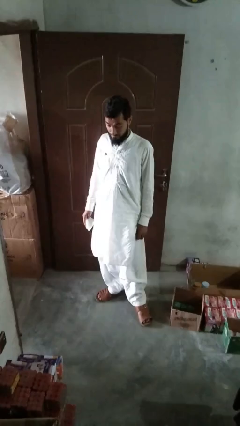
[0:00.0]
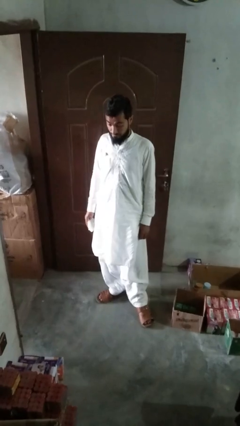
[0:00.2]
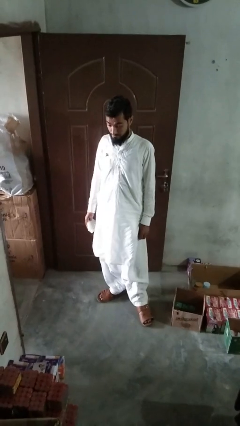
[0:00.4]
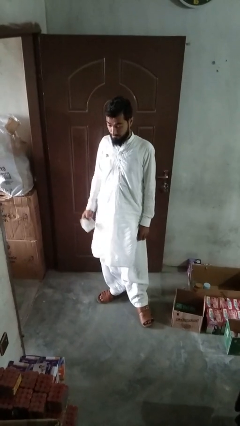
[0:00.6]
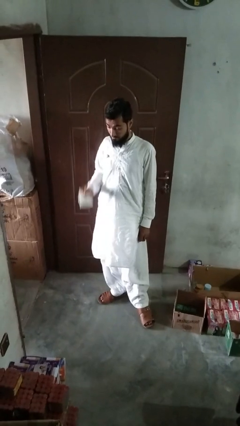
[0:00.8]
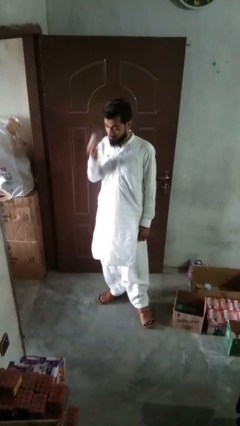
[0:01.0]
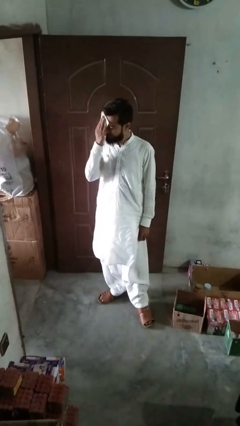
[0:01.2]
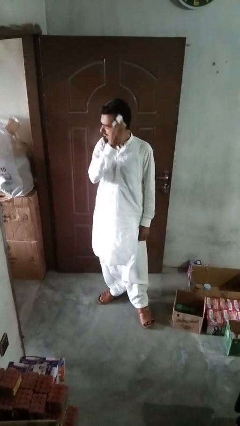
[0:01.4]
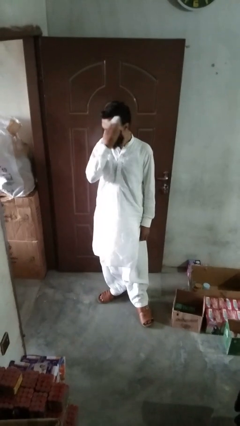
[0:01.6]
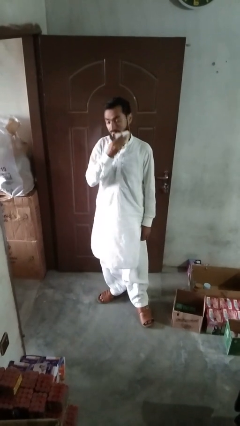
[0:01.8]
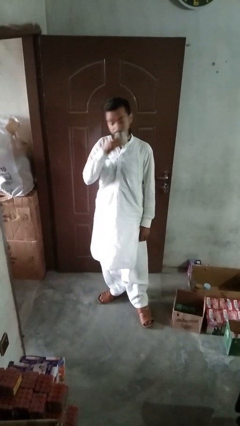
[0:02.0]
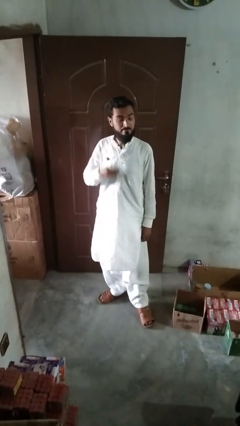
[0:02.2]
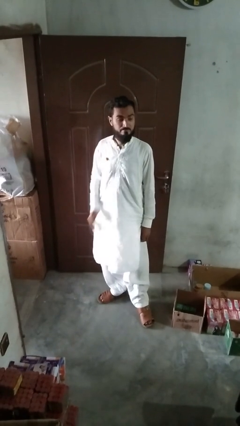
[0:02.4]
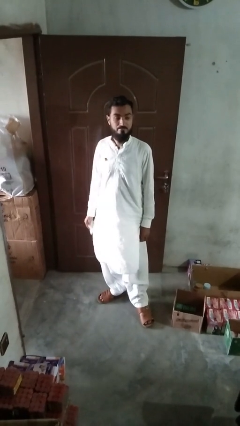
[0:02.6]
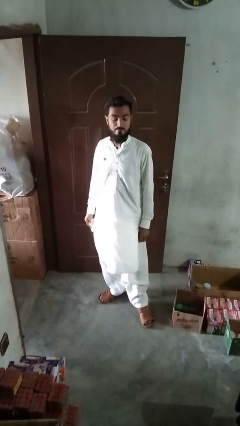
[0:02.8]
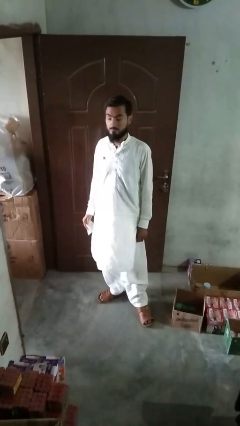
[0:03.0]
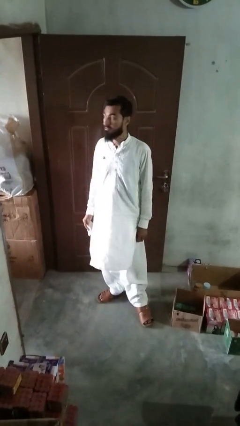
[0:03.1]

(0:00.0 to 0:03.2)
person wipes mouth with napkin

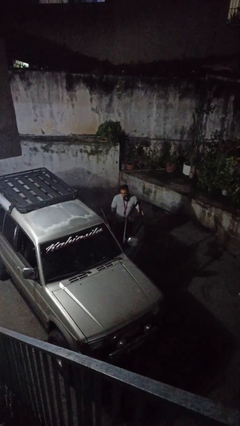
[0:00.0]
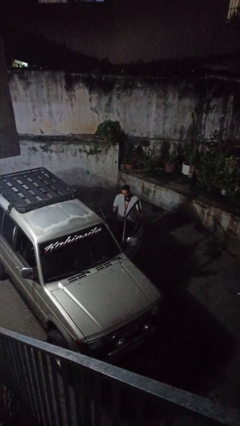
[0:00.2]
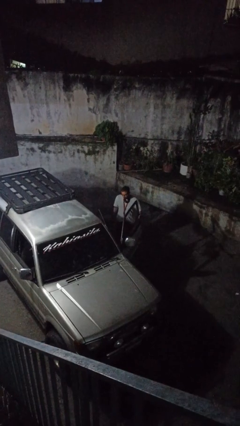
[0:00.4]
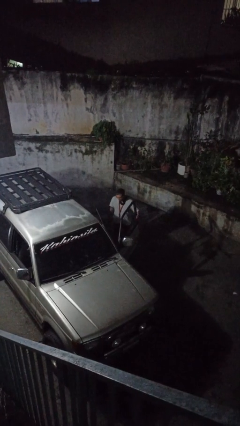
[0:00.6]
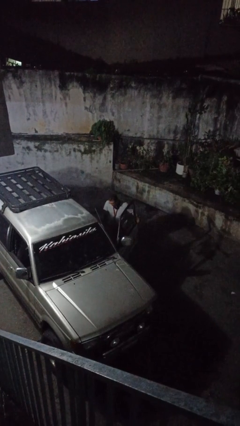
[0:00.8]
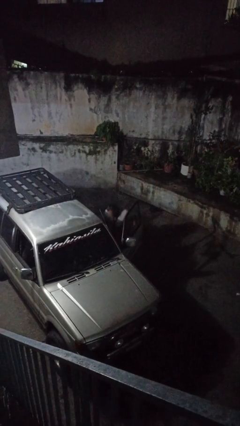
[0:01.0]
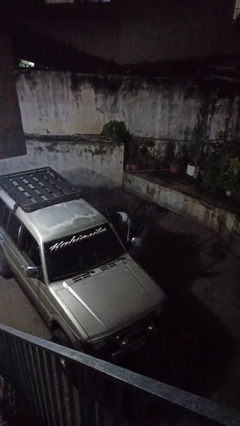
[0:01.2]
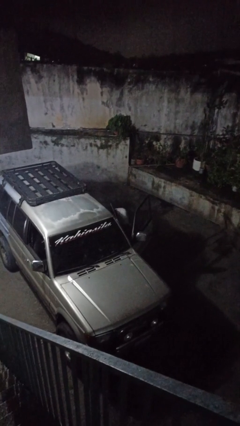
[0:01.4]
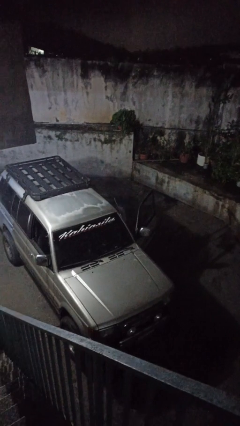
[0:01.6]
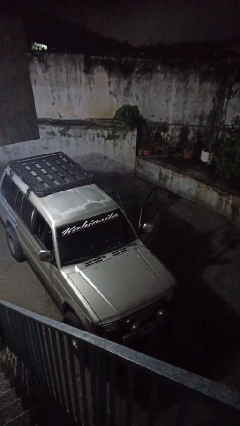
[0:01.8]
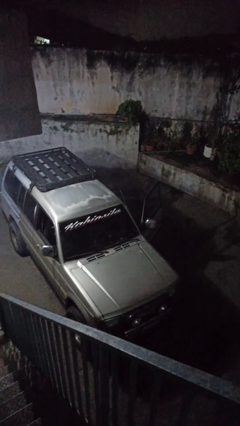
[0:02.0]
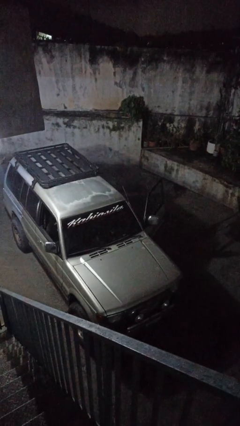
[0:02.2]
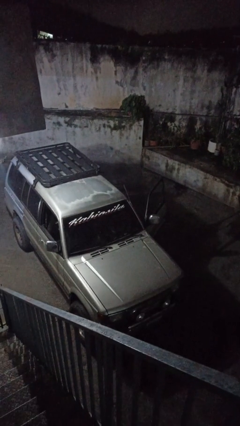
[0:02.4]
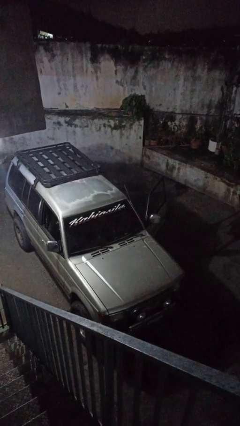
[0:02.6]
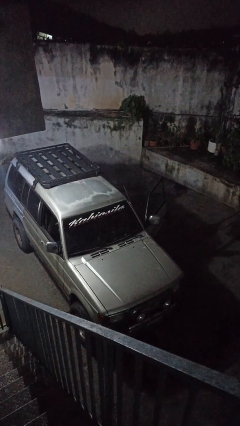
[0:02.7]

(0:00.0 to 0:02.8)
person enters car

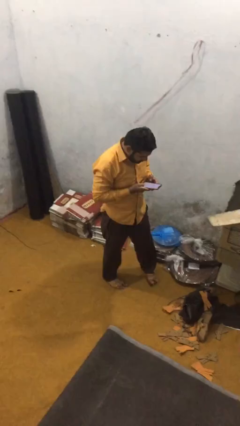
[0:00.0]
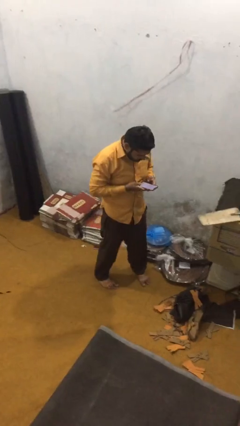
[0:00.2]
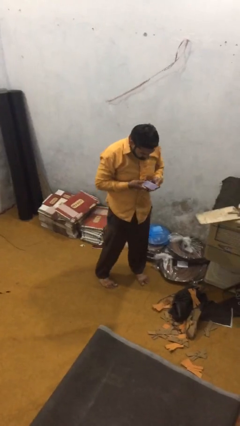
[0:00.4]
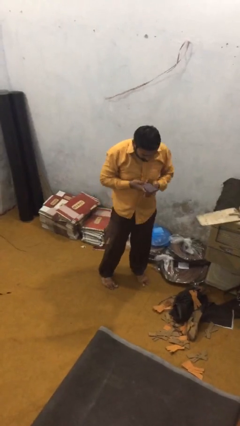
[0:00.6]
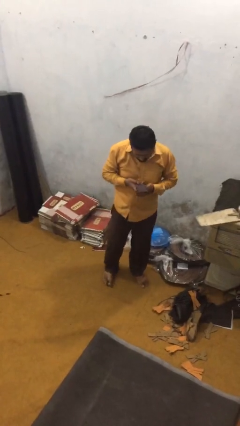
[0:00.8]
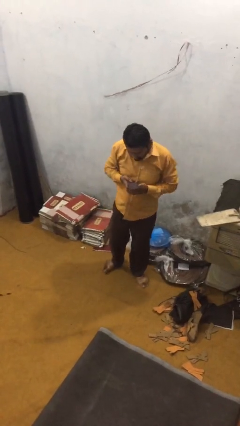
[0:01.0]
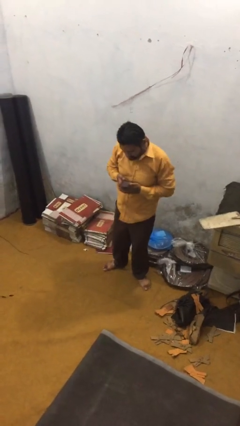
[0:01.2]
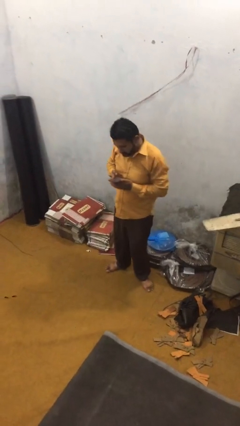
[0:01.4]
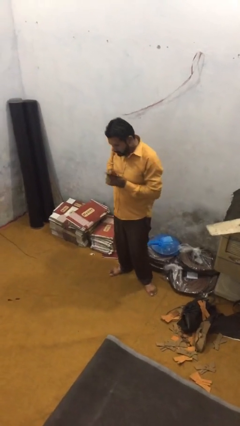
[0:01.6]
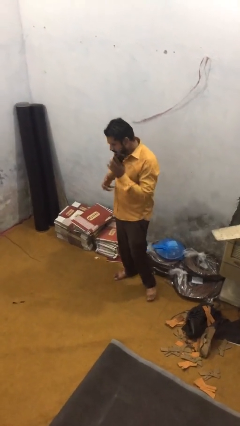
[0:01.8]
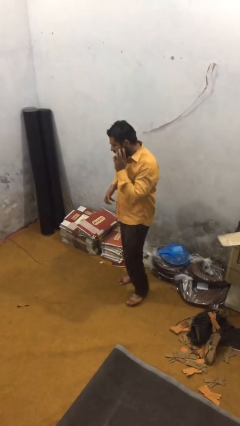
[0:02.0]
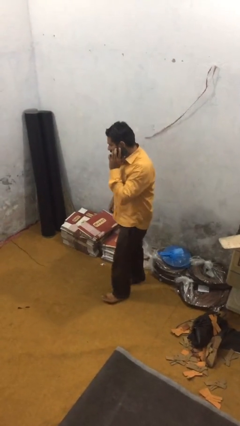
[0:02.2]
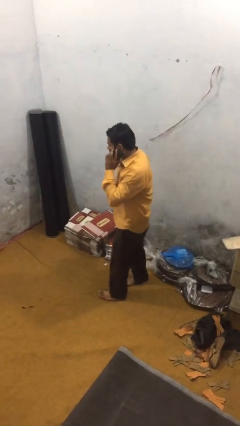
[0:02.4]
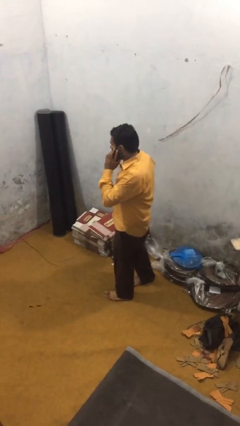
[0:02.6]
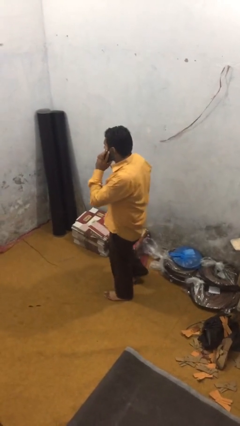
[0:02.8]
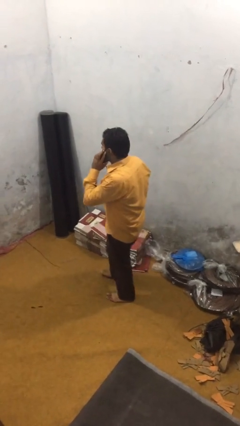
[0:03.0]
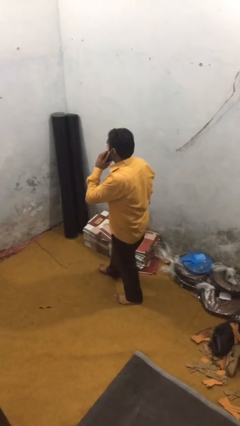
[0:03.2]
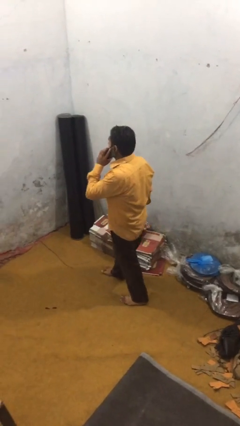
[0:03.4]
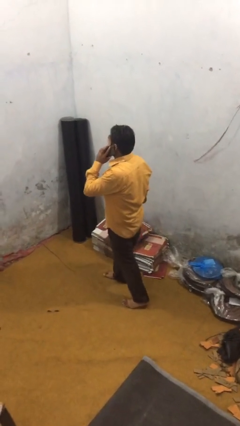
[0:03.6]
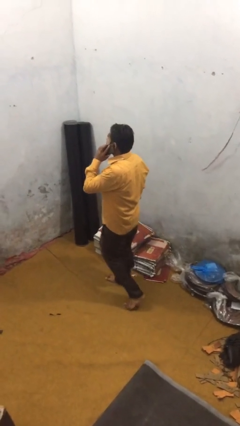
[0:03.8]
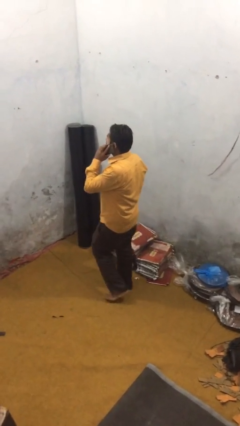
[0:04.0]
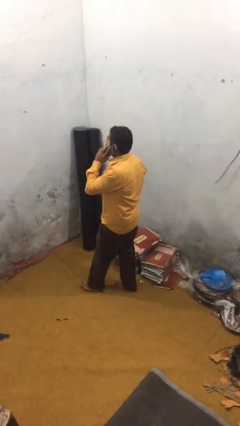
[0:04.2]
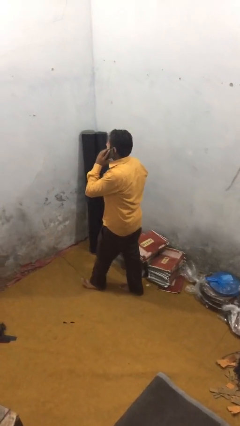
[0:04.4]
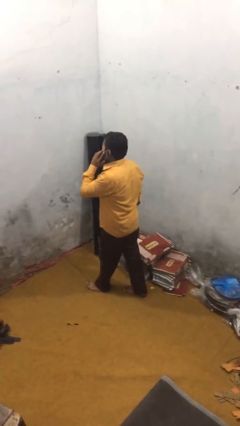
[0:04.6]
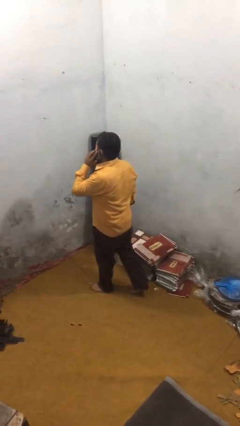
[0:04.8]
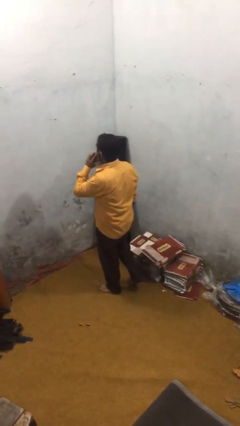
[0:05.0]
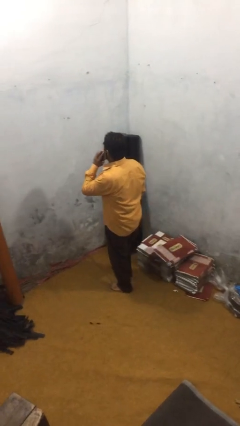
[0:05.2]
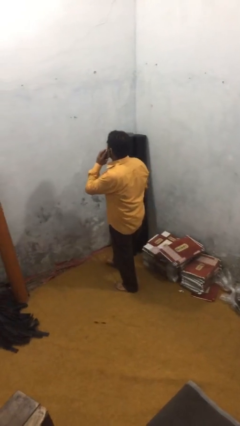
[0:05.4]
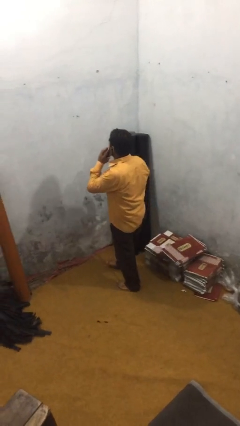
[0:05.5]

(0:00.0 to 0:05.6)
person talks on phone

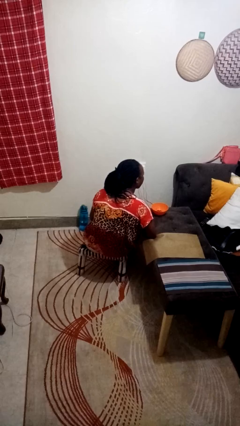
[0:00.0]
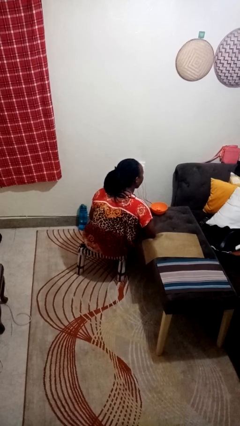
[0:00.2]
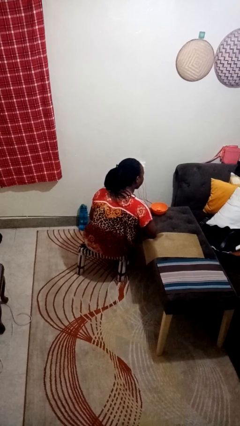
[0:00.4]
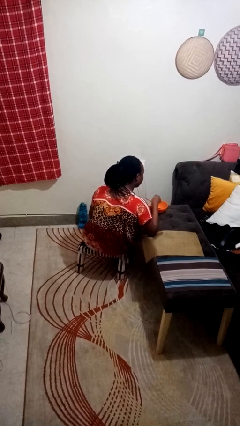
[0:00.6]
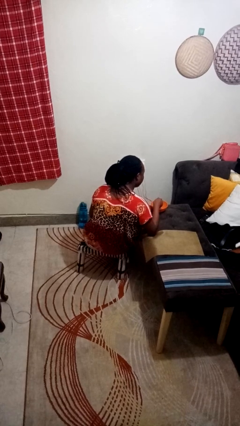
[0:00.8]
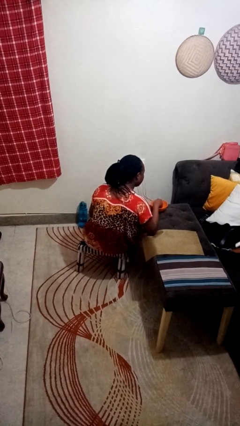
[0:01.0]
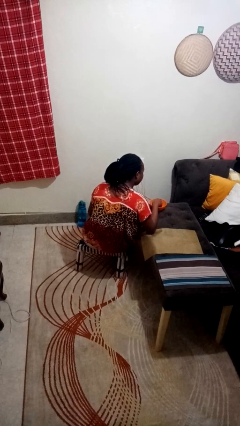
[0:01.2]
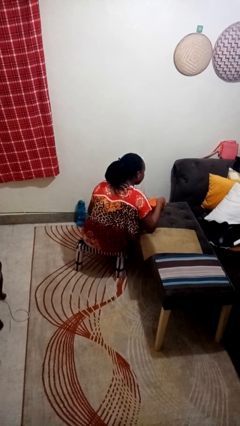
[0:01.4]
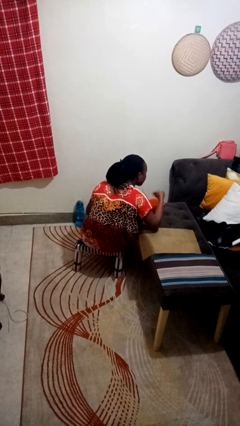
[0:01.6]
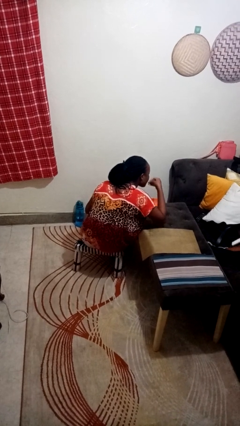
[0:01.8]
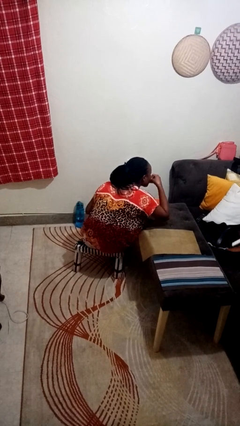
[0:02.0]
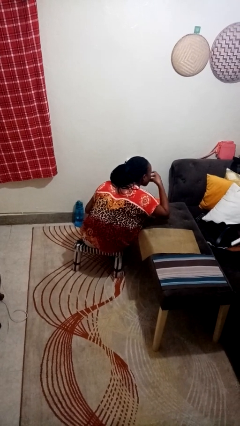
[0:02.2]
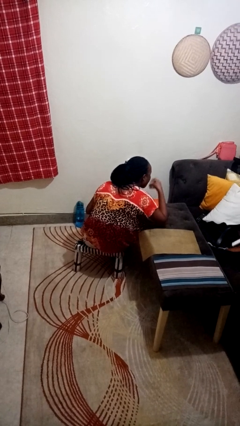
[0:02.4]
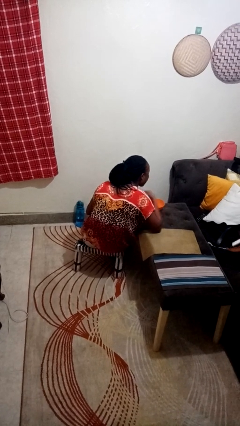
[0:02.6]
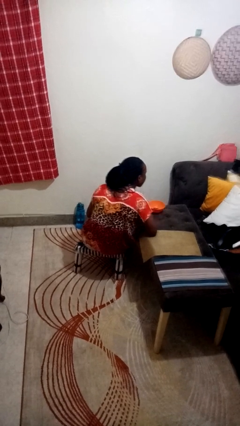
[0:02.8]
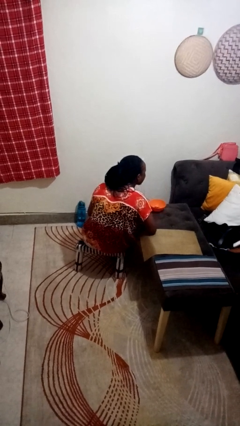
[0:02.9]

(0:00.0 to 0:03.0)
person eats with hands

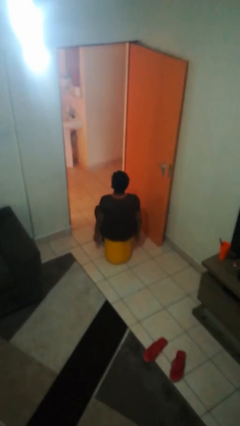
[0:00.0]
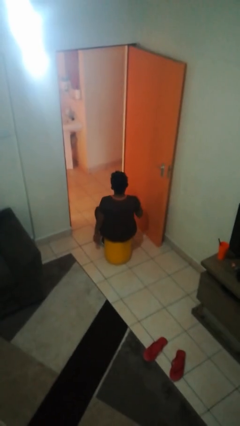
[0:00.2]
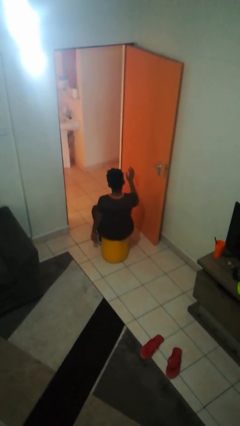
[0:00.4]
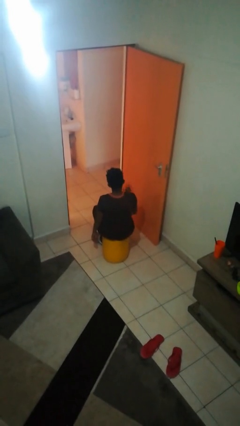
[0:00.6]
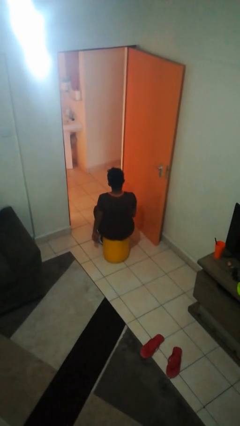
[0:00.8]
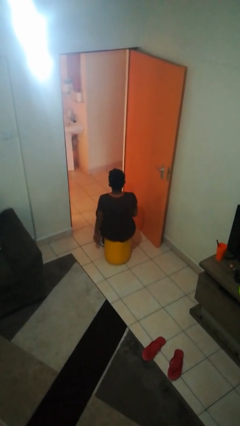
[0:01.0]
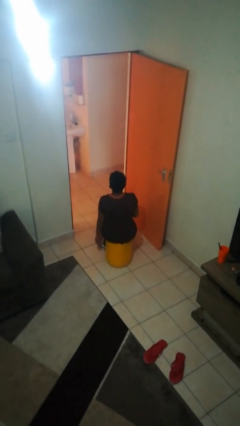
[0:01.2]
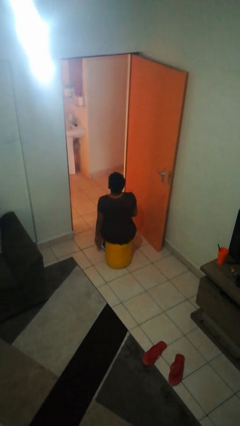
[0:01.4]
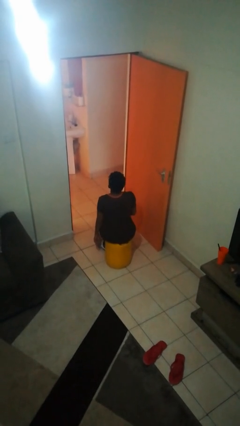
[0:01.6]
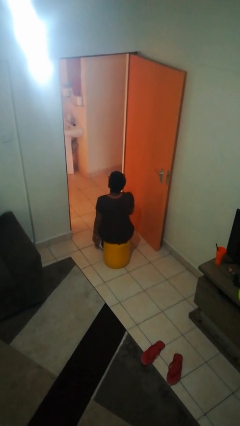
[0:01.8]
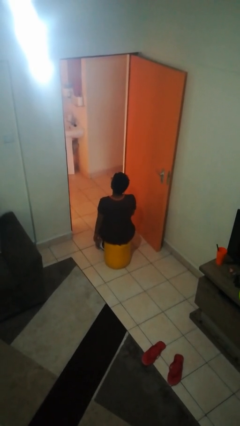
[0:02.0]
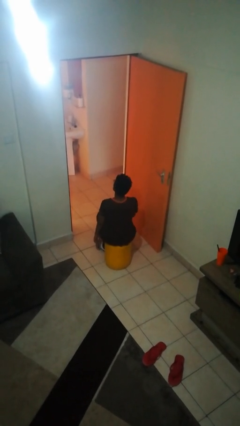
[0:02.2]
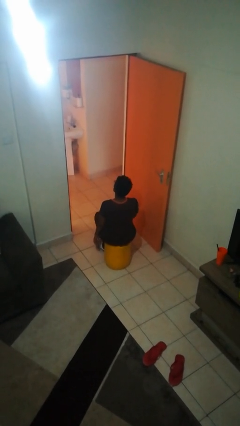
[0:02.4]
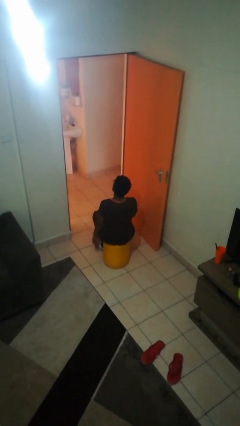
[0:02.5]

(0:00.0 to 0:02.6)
person slaps hands on thighs

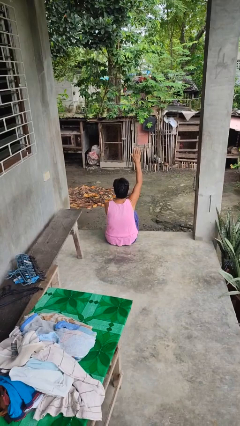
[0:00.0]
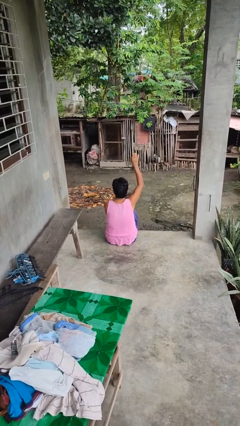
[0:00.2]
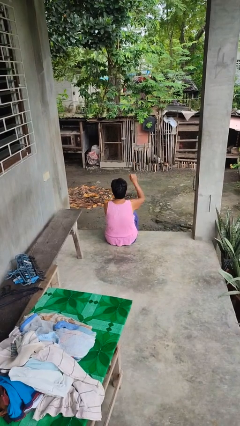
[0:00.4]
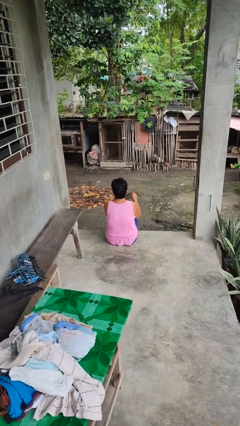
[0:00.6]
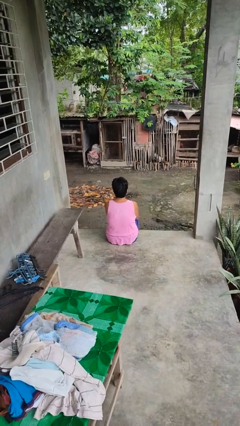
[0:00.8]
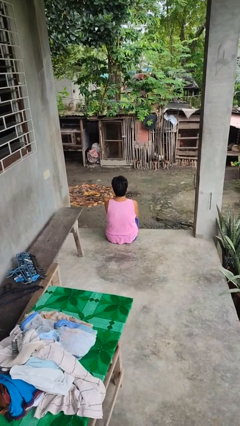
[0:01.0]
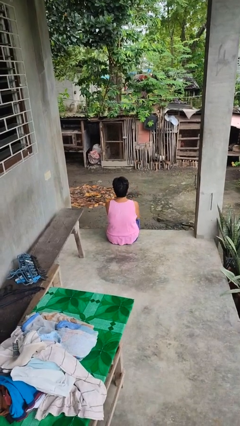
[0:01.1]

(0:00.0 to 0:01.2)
person gestures lower hand
